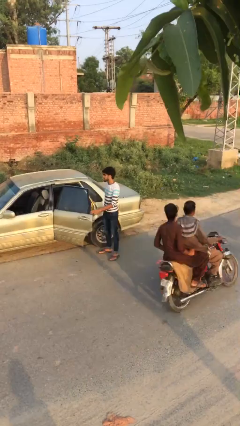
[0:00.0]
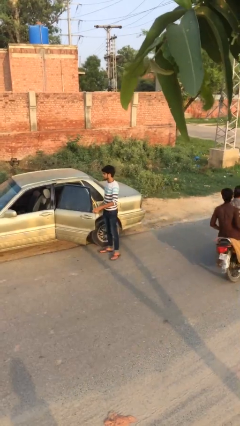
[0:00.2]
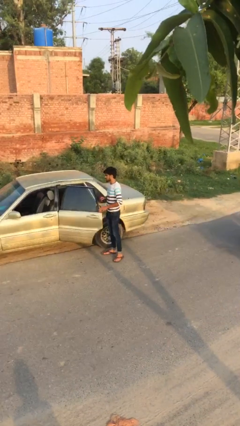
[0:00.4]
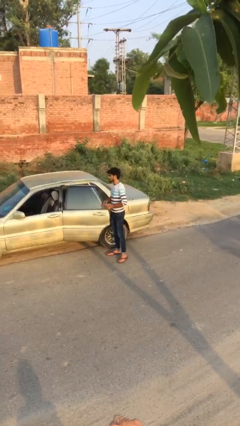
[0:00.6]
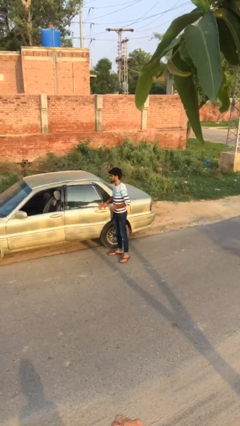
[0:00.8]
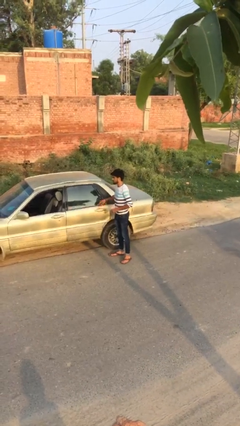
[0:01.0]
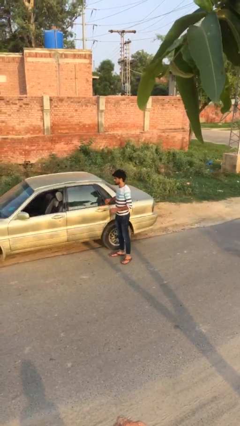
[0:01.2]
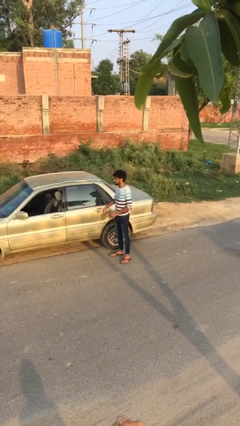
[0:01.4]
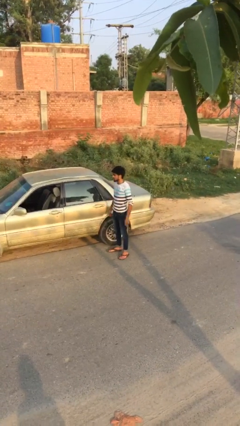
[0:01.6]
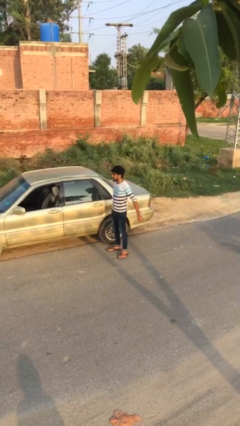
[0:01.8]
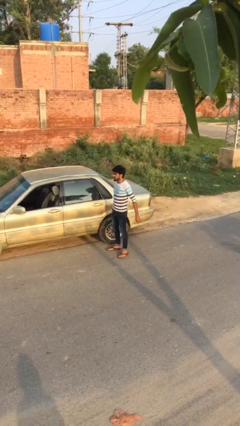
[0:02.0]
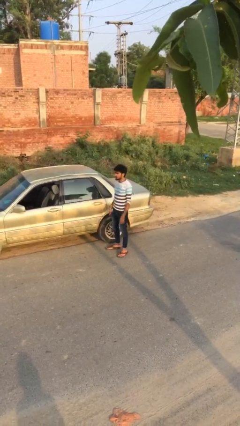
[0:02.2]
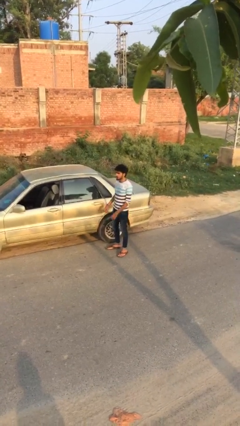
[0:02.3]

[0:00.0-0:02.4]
person closes car door

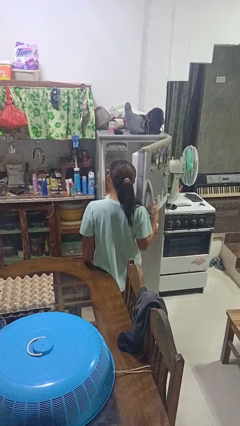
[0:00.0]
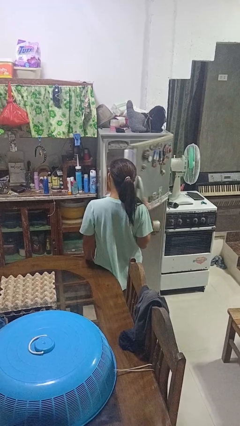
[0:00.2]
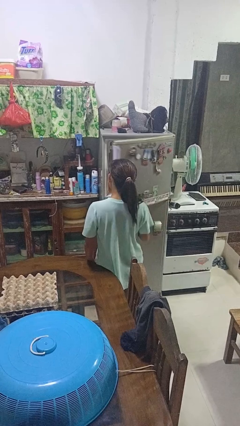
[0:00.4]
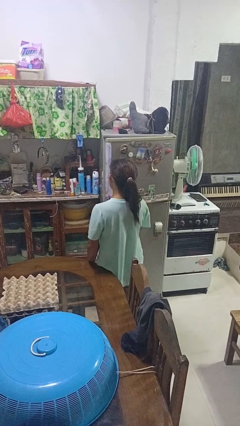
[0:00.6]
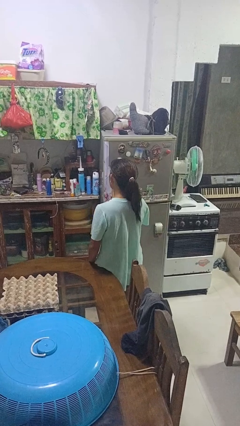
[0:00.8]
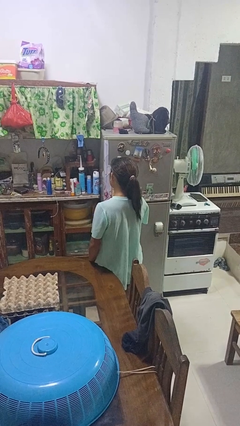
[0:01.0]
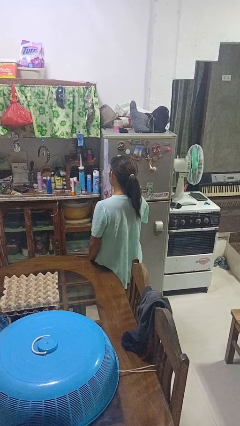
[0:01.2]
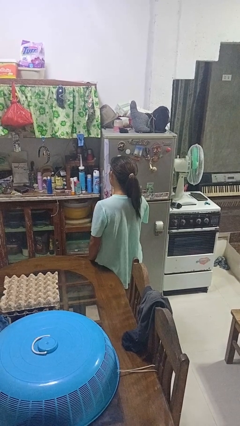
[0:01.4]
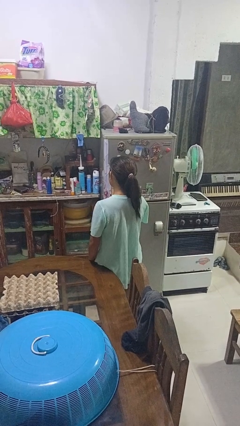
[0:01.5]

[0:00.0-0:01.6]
person closes refrigerator

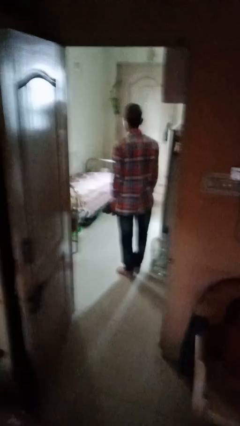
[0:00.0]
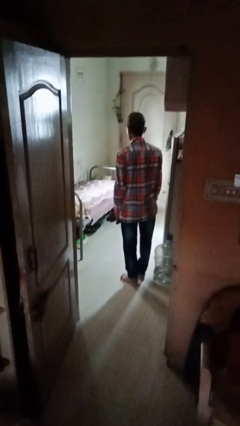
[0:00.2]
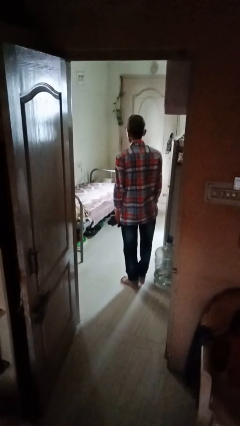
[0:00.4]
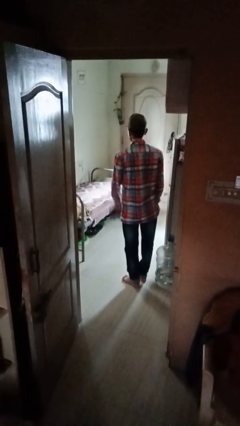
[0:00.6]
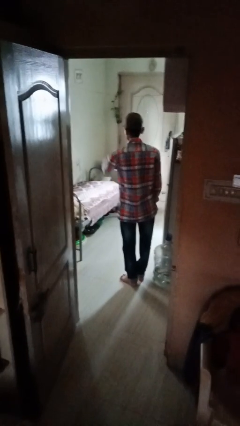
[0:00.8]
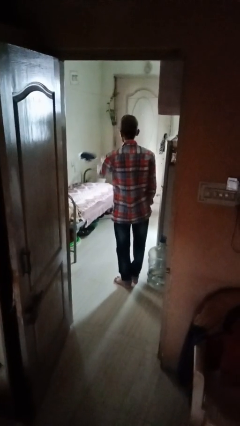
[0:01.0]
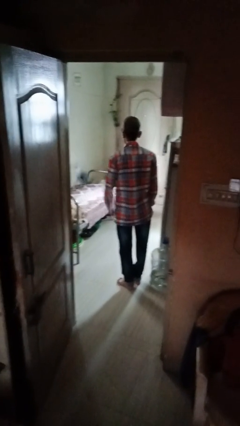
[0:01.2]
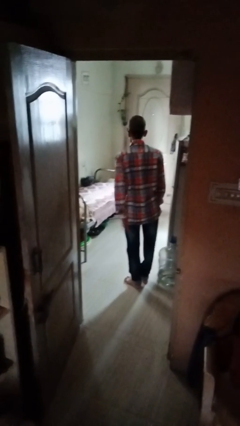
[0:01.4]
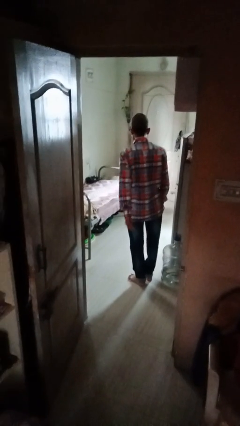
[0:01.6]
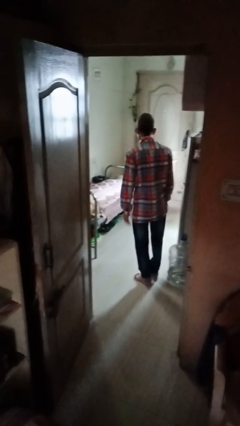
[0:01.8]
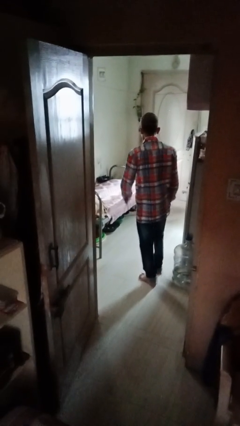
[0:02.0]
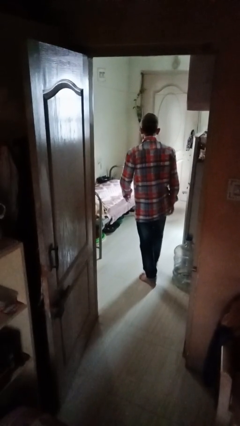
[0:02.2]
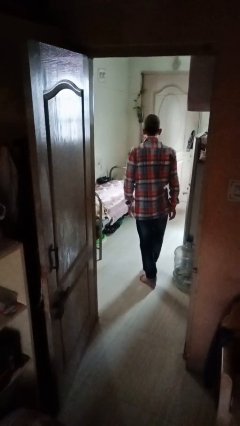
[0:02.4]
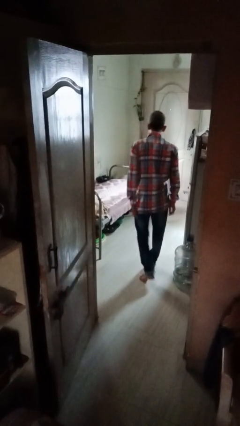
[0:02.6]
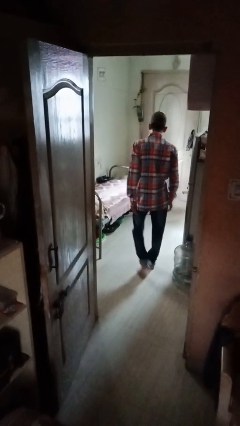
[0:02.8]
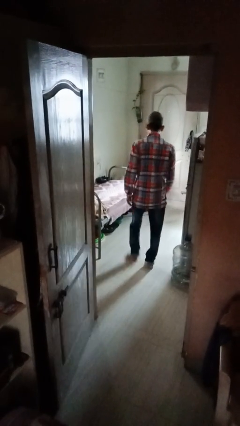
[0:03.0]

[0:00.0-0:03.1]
person throws object on bed

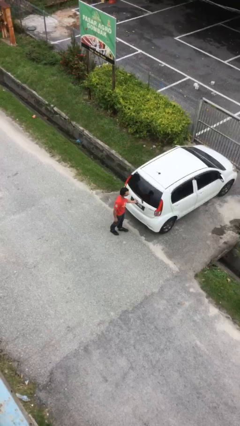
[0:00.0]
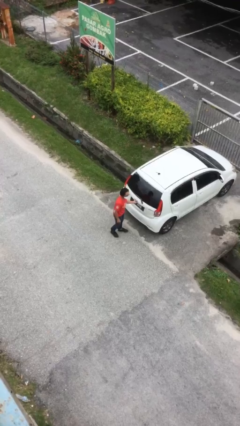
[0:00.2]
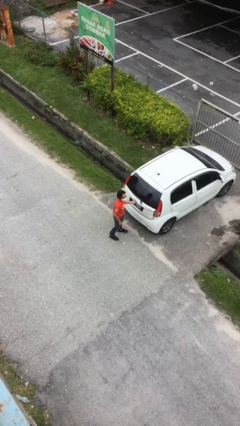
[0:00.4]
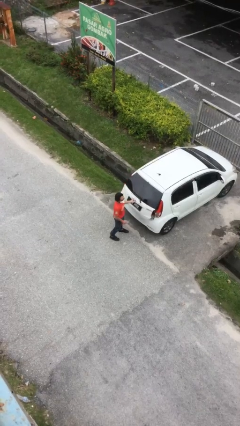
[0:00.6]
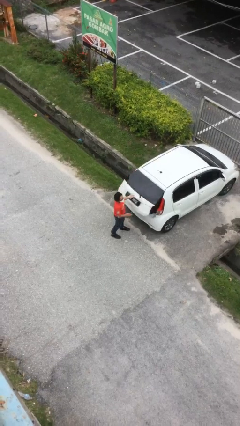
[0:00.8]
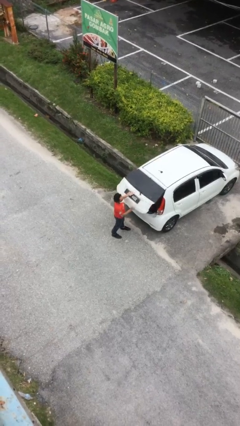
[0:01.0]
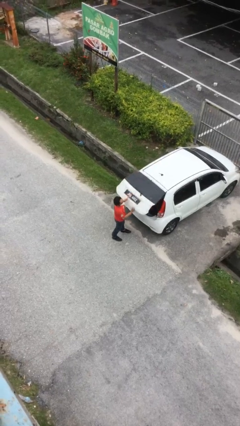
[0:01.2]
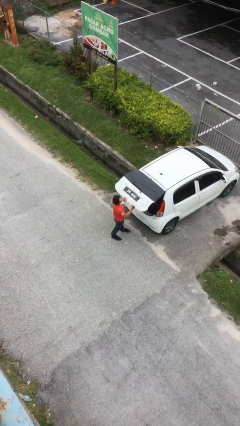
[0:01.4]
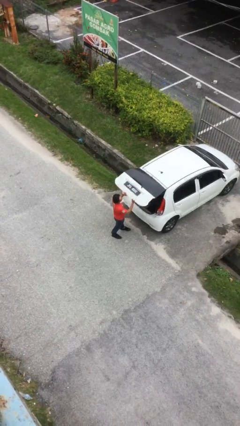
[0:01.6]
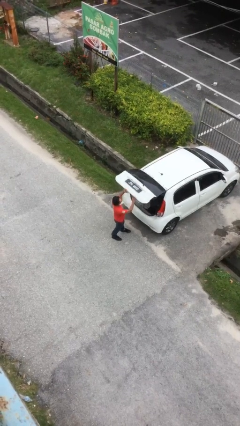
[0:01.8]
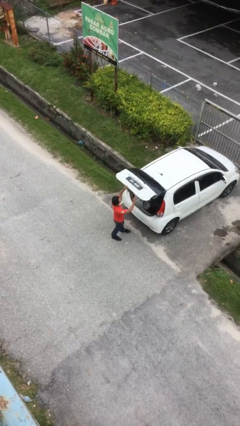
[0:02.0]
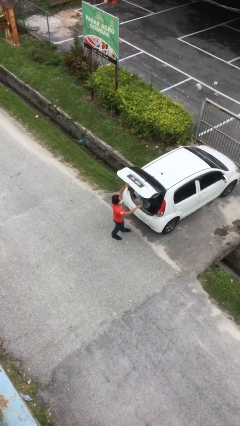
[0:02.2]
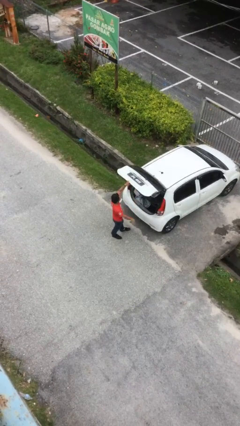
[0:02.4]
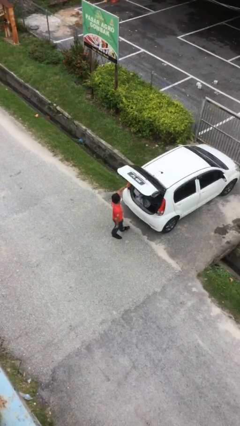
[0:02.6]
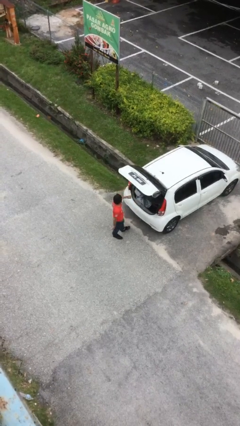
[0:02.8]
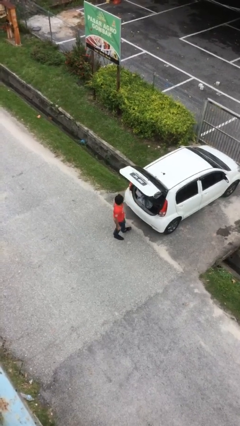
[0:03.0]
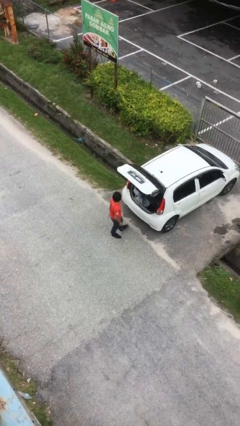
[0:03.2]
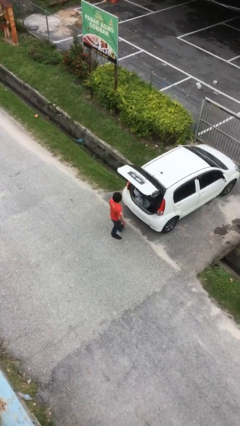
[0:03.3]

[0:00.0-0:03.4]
person opens car trunk
